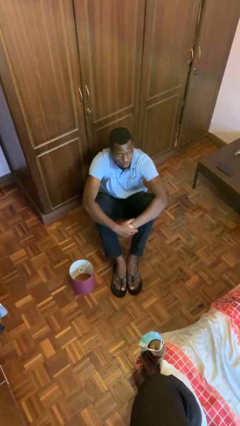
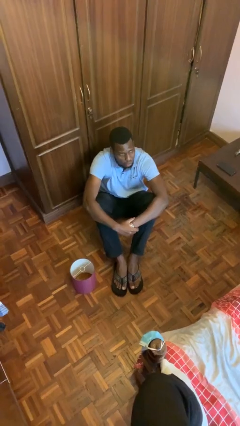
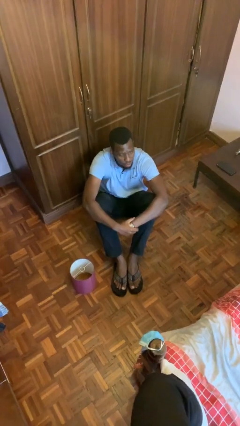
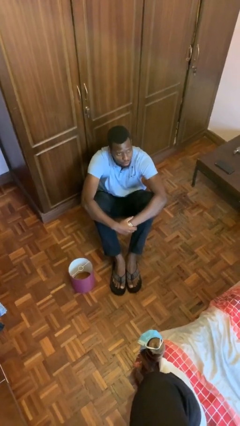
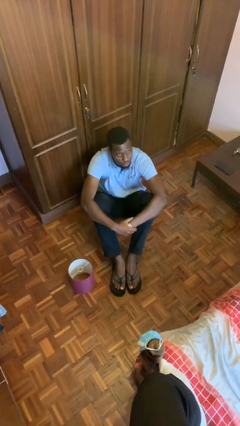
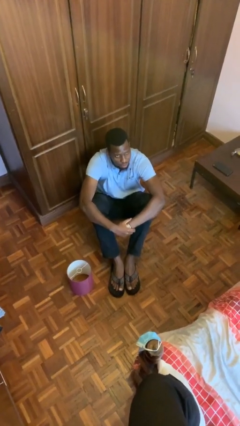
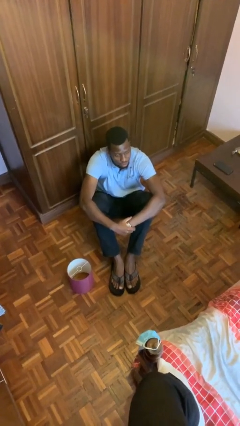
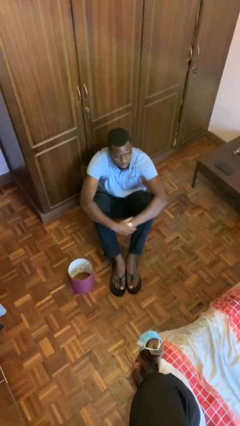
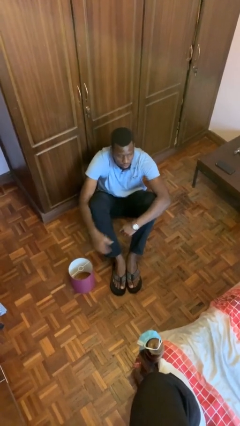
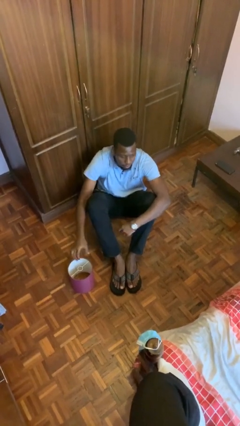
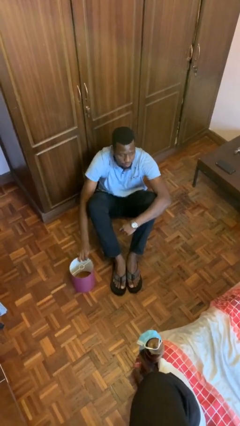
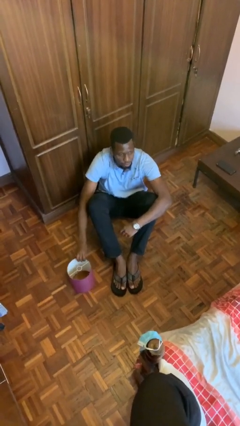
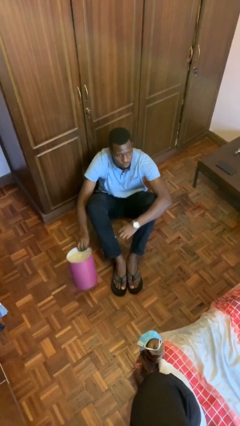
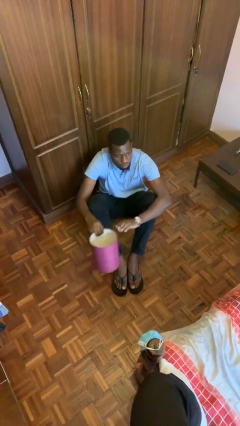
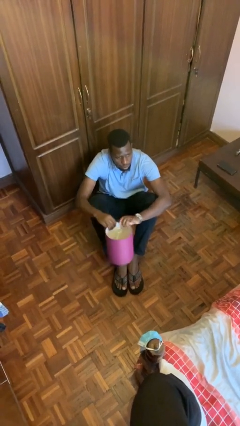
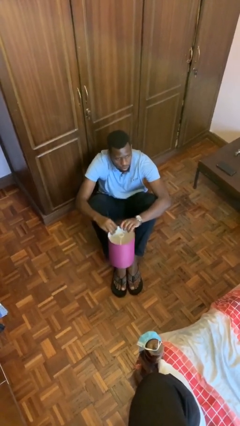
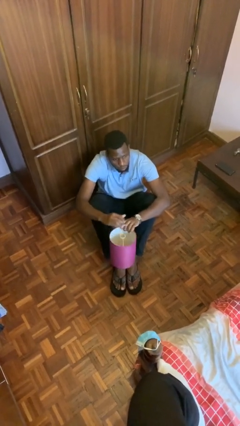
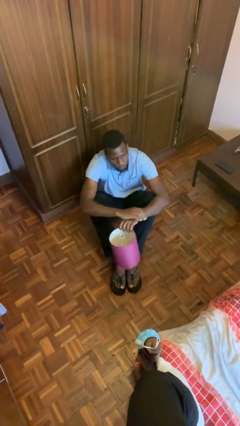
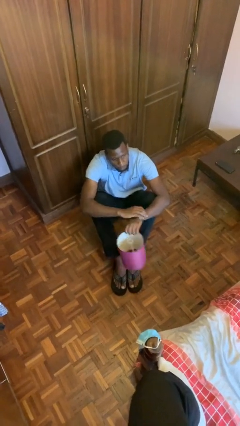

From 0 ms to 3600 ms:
person picks up object from floor

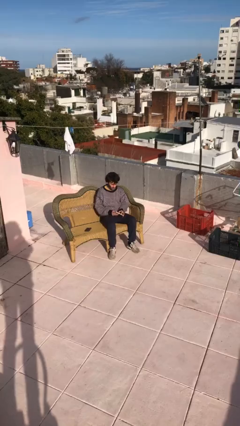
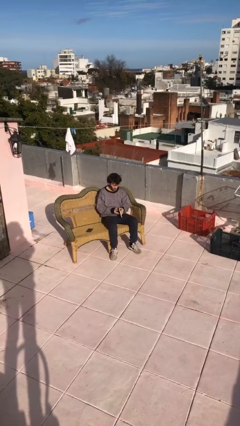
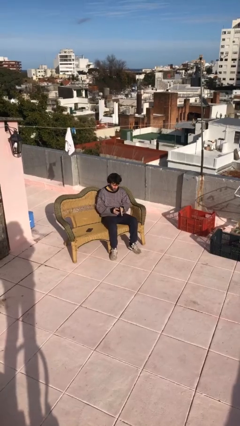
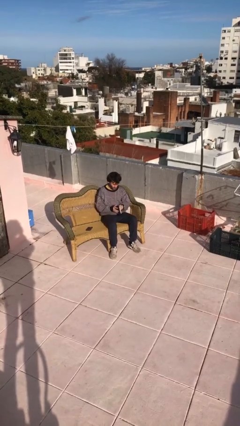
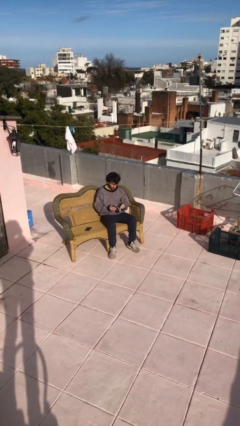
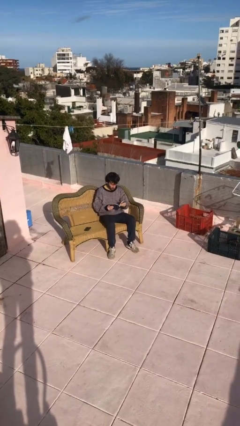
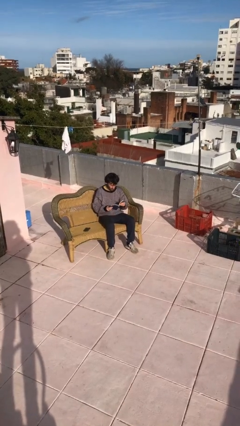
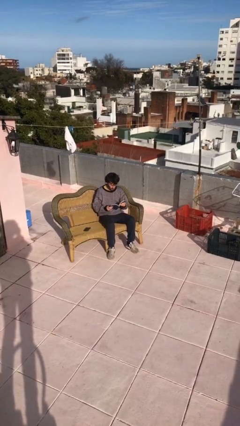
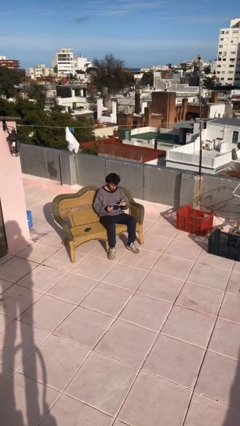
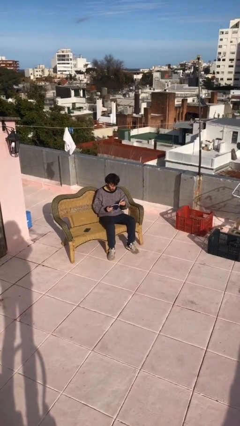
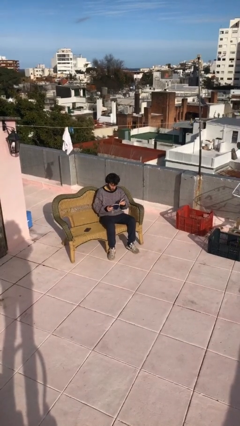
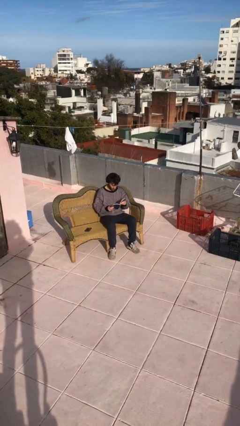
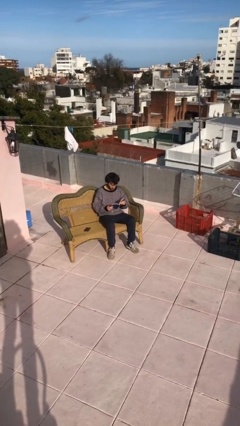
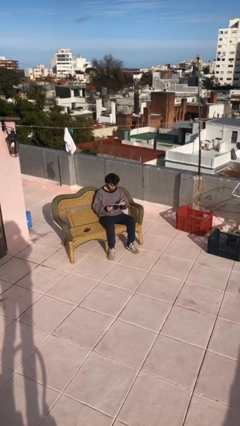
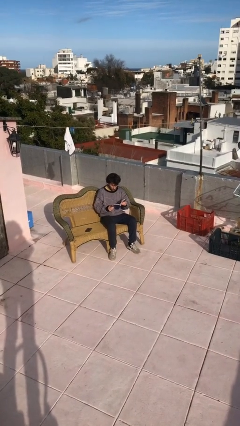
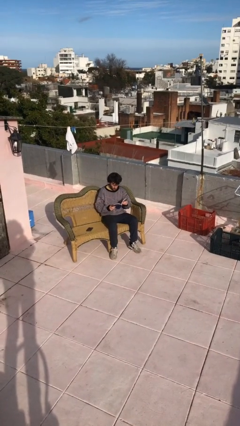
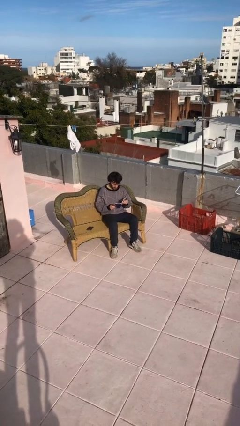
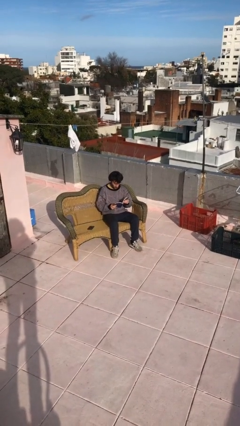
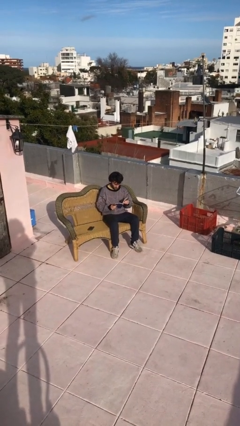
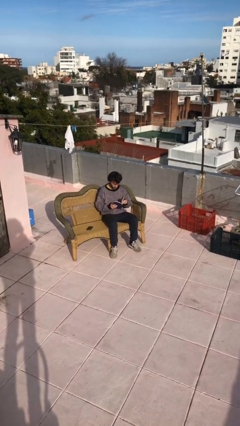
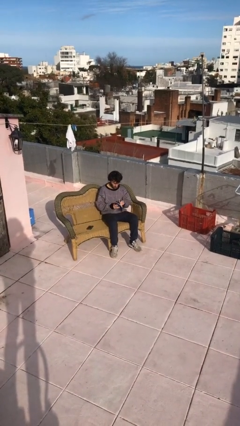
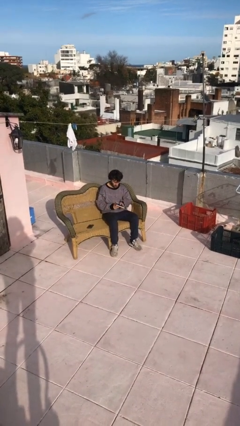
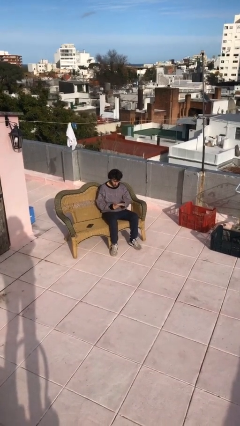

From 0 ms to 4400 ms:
person reads book

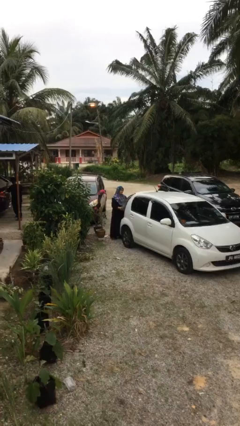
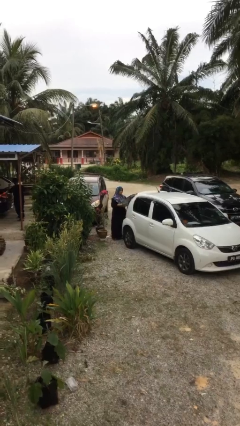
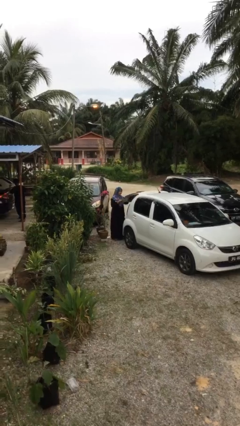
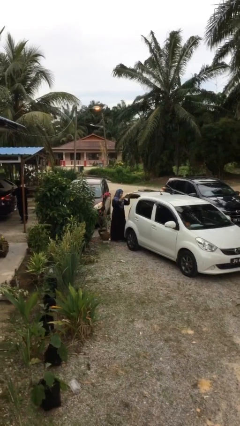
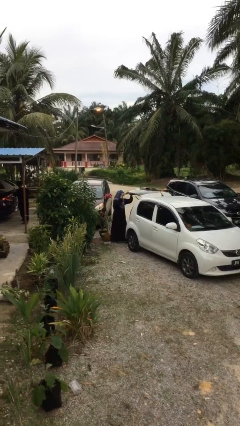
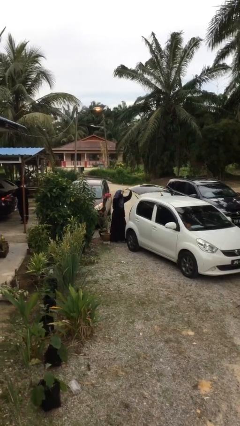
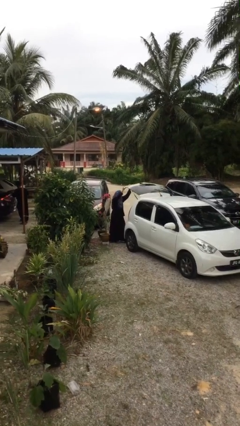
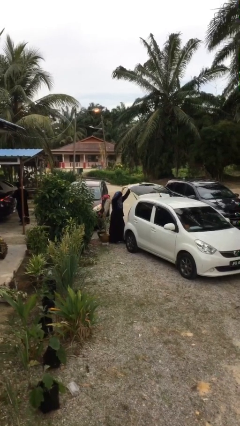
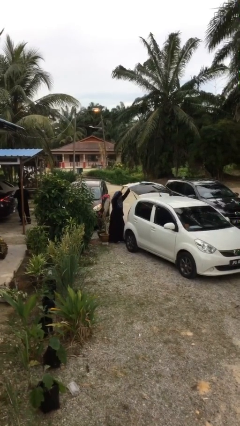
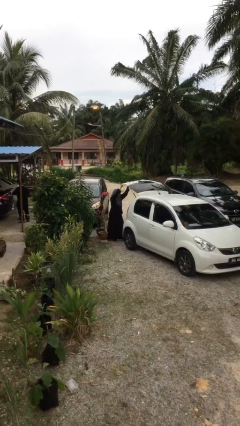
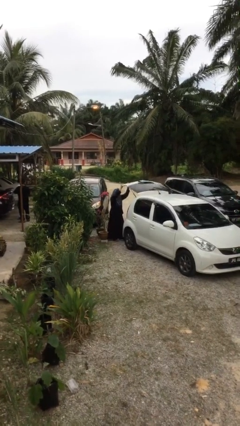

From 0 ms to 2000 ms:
person opens car trunk

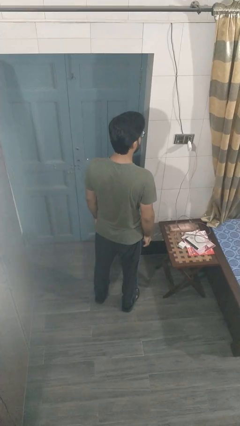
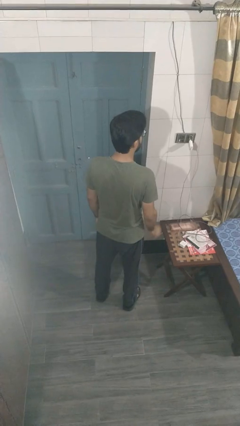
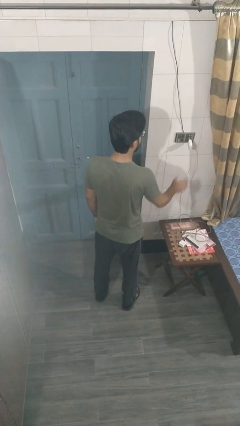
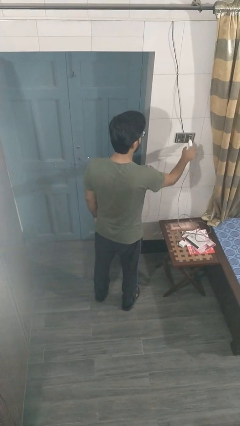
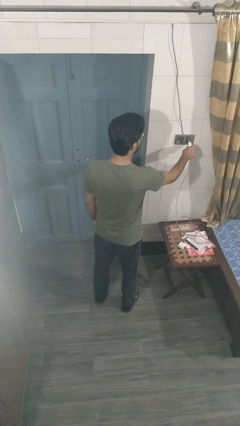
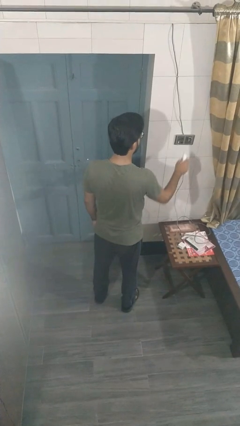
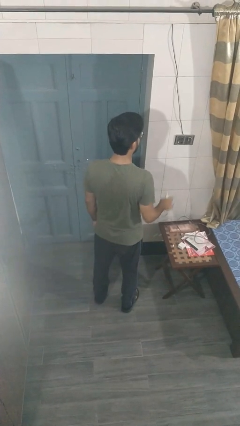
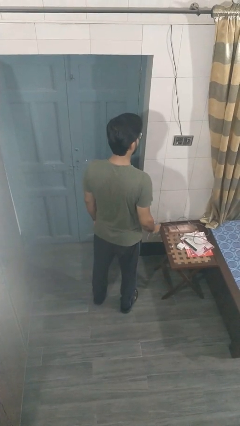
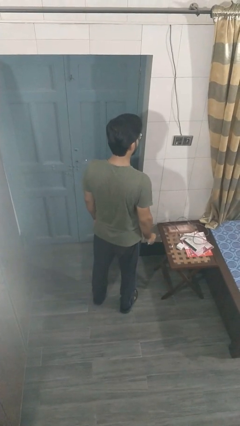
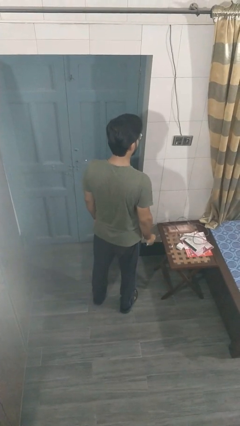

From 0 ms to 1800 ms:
person unplugs from electrical socket

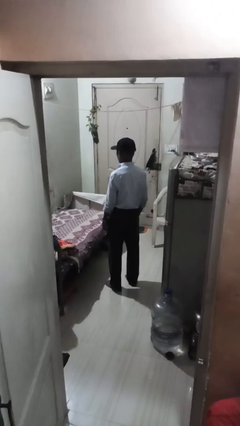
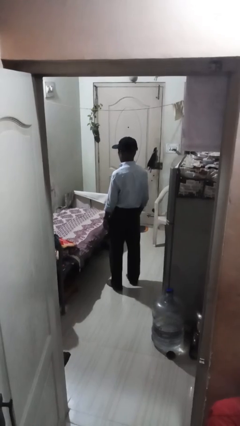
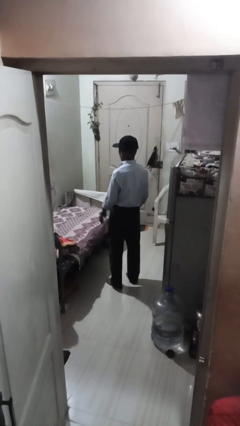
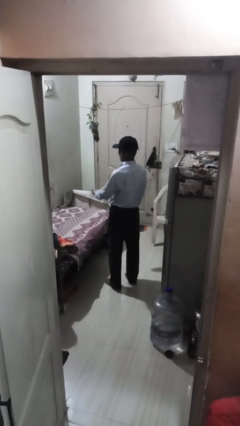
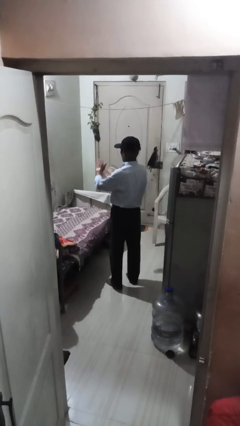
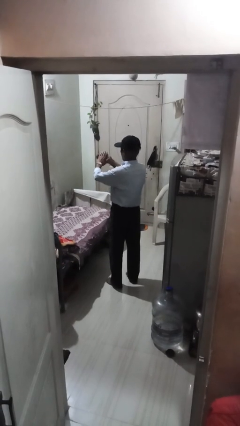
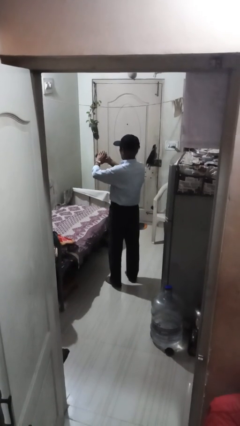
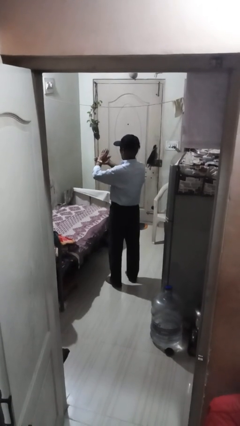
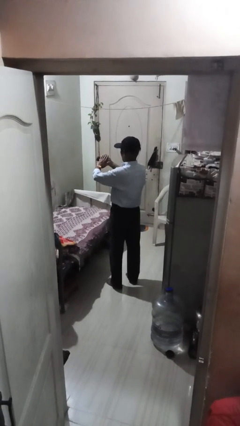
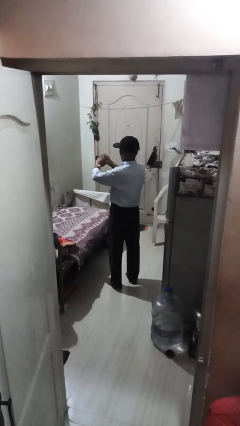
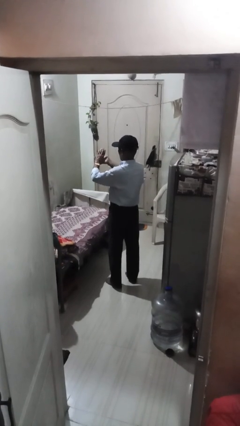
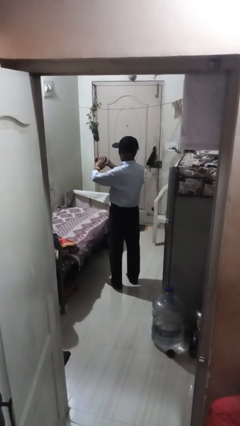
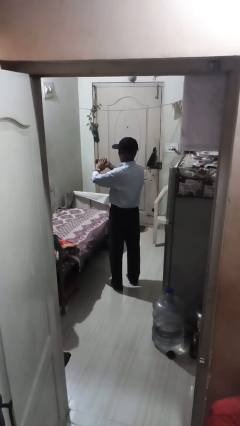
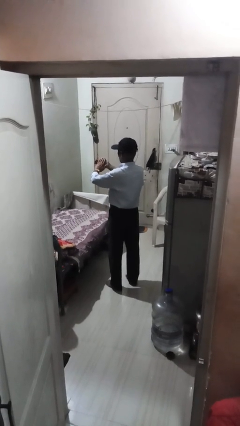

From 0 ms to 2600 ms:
person claps hands

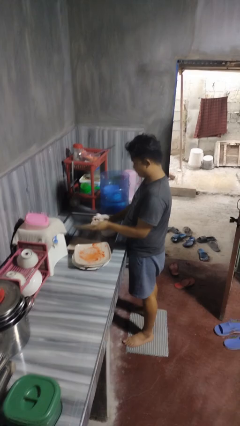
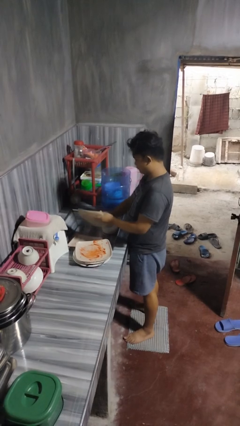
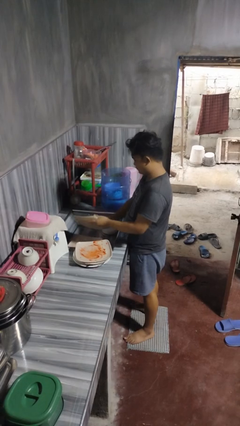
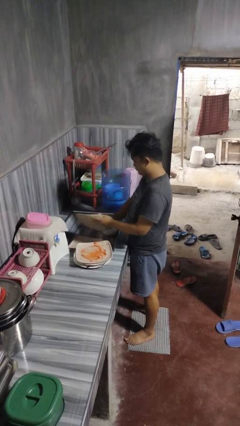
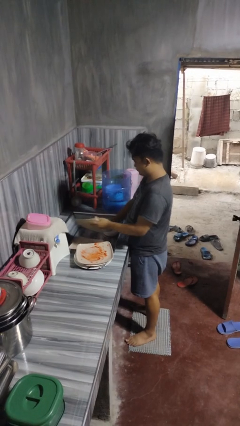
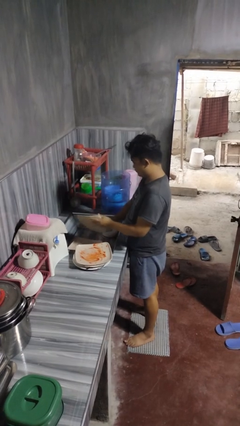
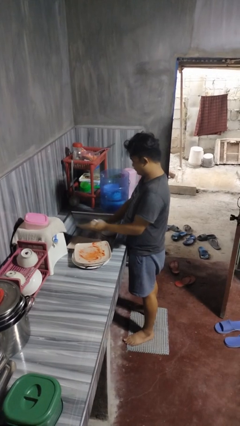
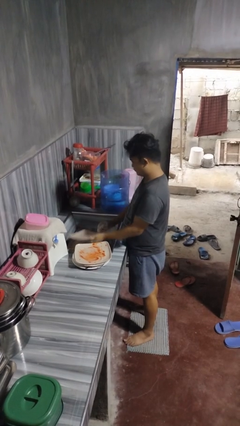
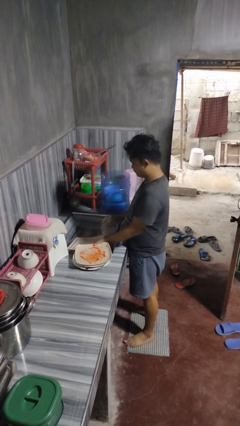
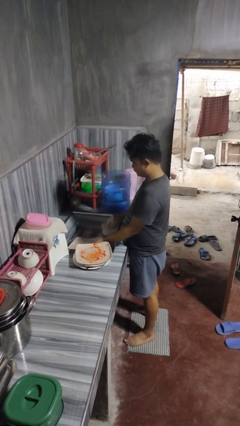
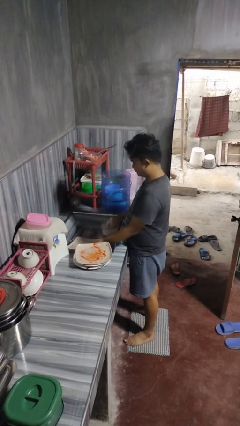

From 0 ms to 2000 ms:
person washes dish

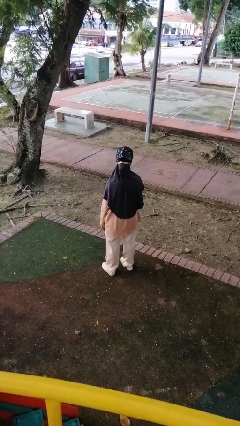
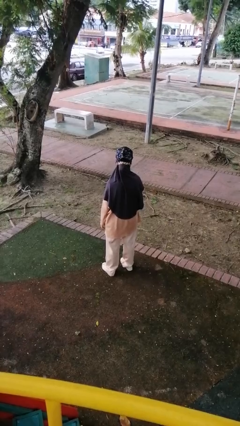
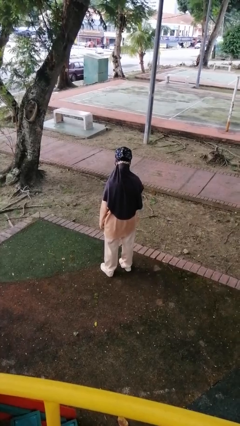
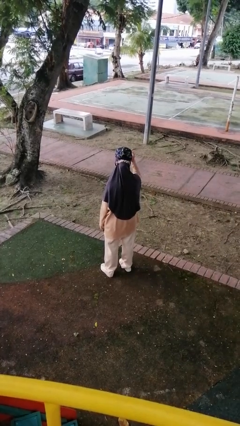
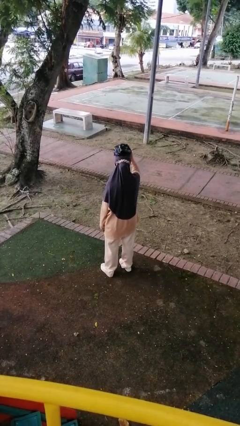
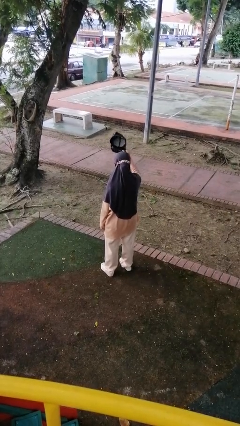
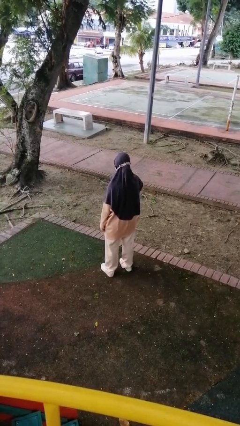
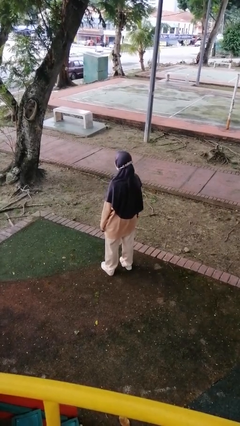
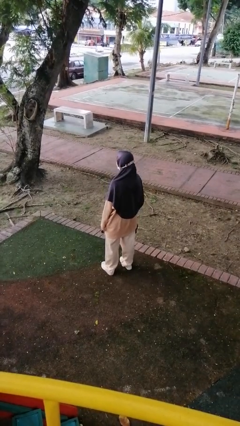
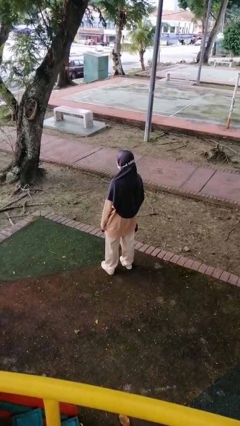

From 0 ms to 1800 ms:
person takes off hat
